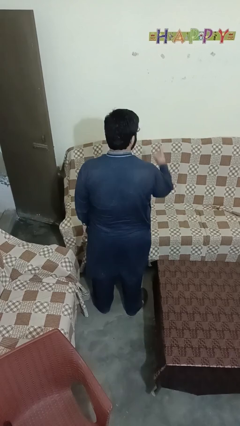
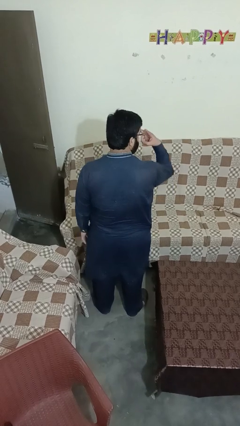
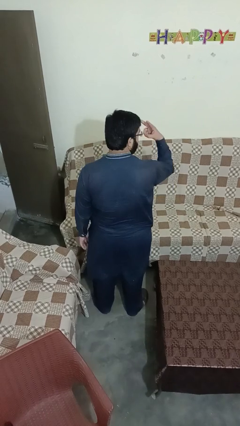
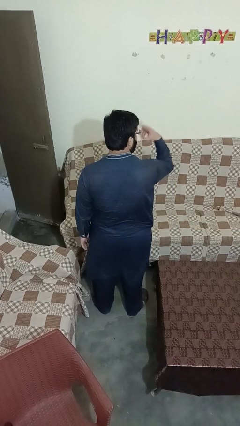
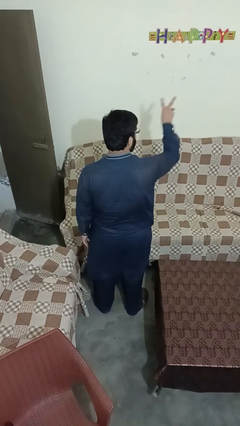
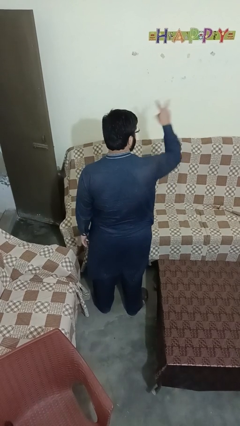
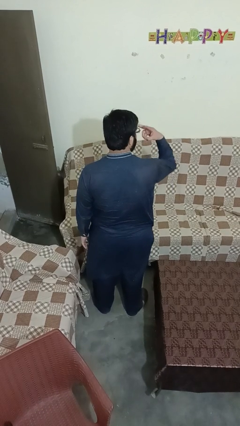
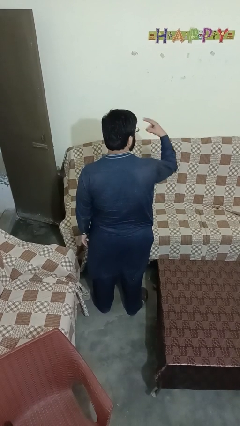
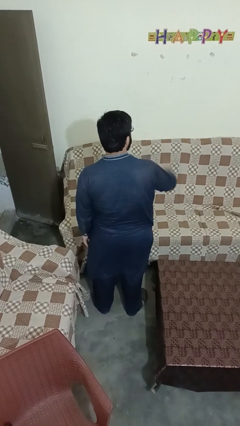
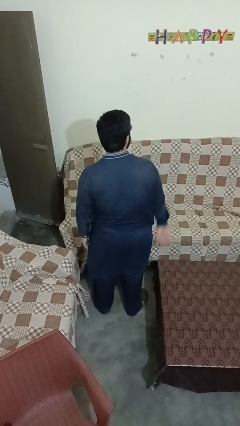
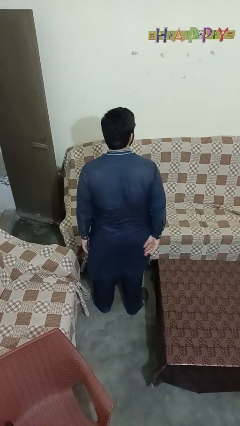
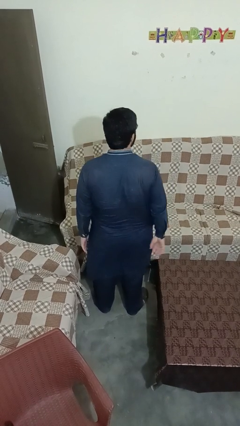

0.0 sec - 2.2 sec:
person gestures watch closely

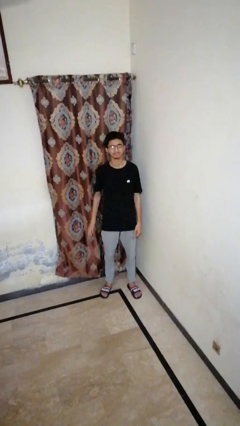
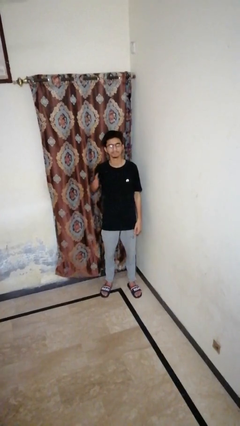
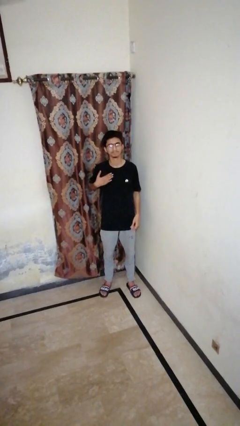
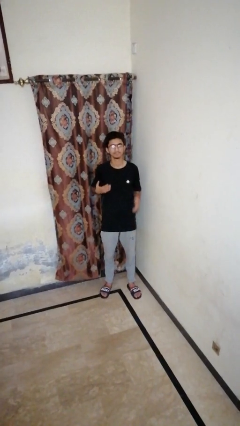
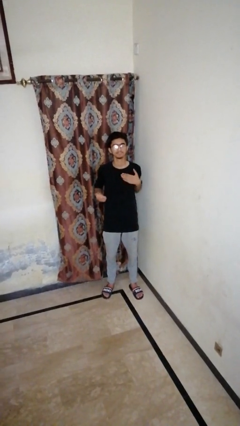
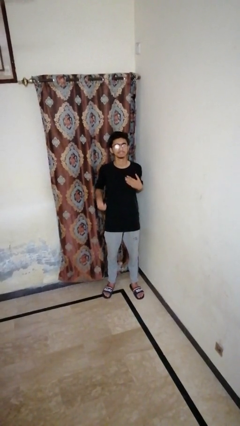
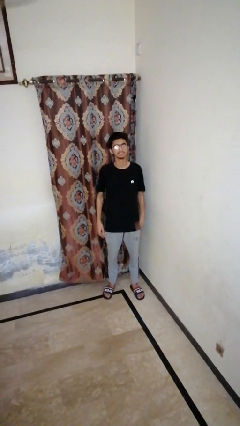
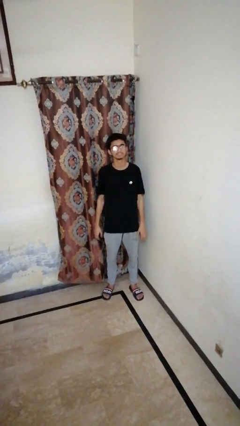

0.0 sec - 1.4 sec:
person drums on chest

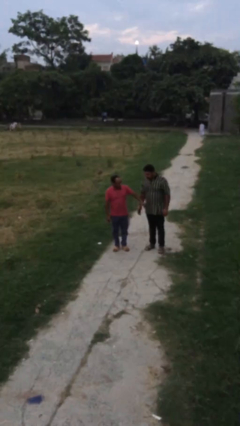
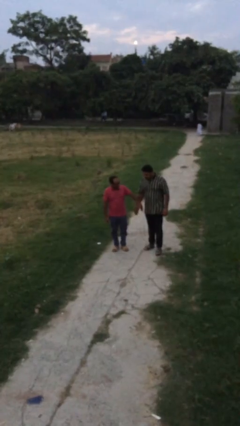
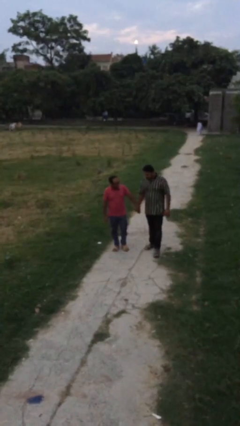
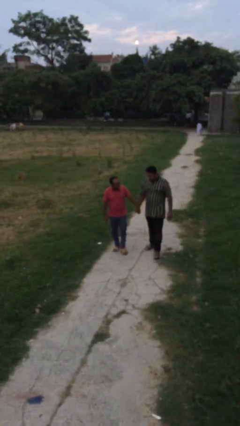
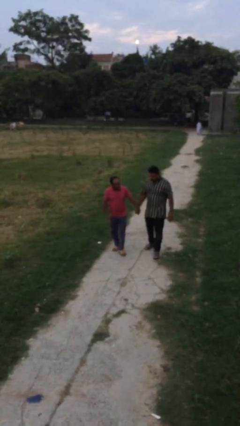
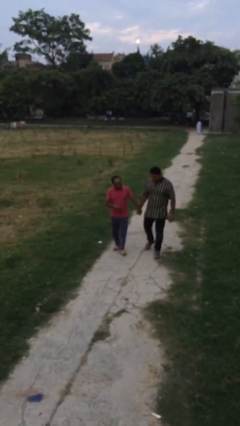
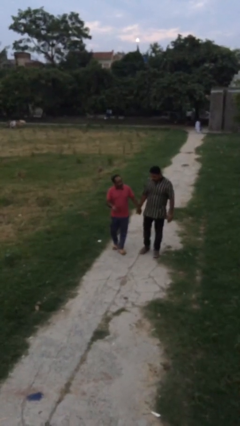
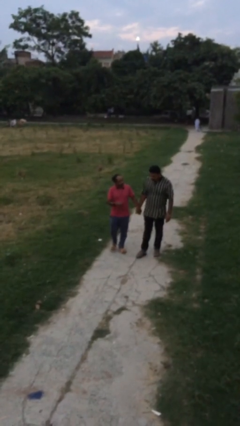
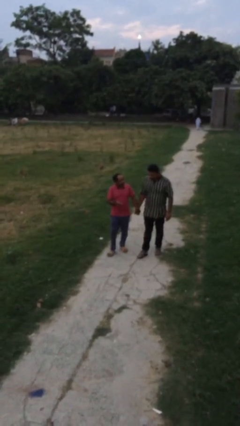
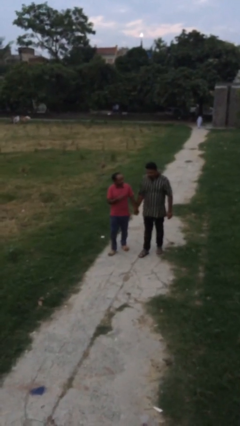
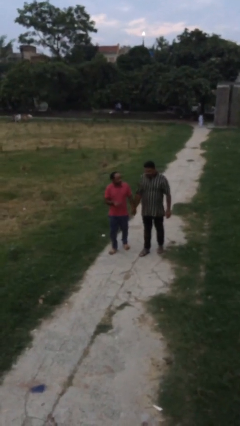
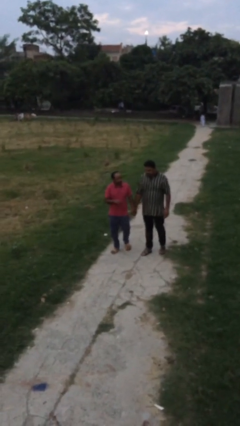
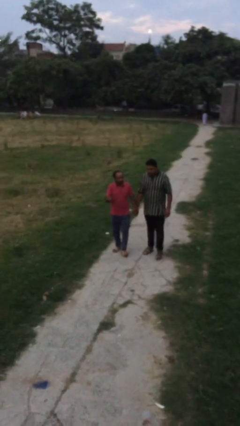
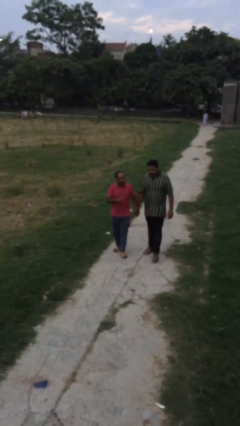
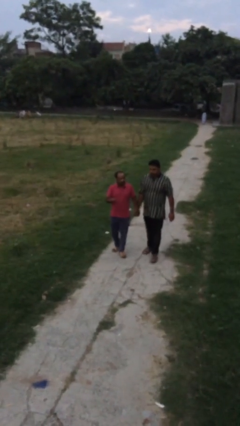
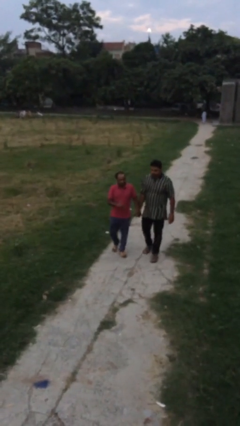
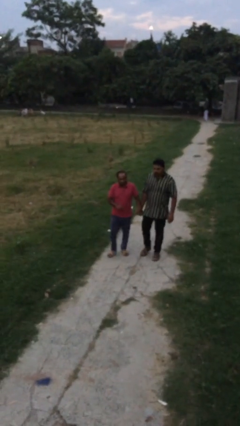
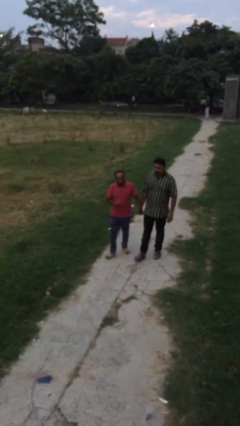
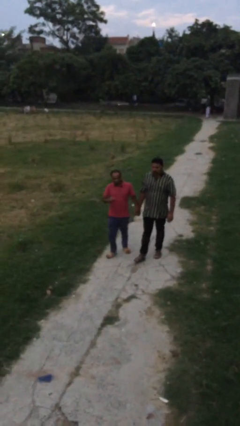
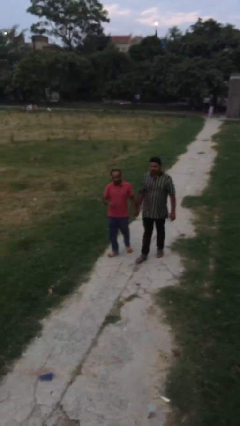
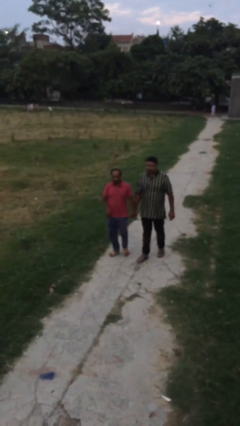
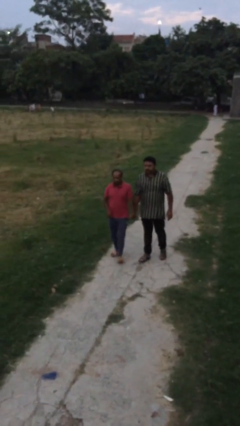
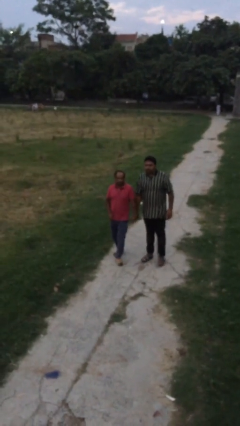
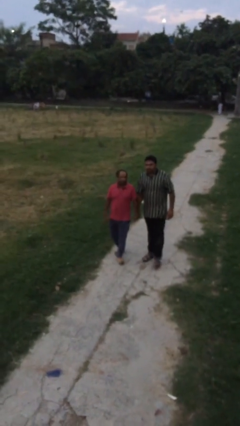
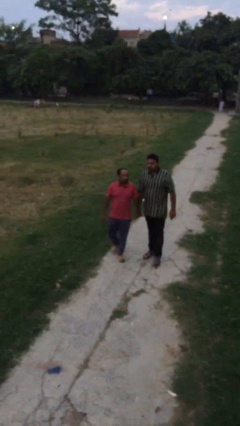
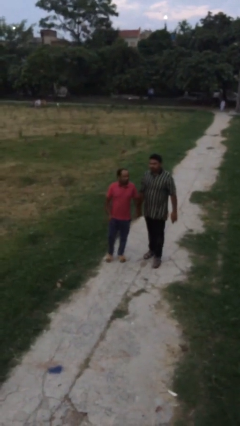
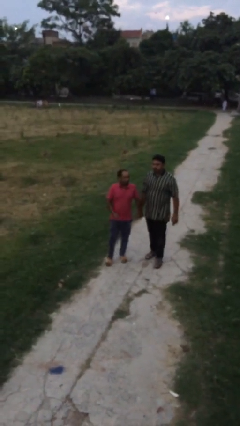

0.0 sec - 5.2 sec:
person holds hand

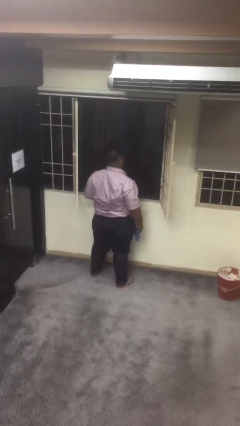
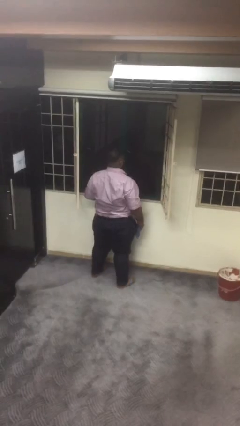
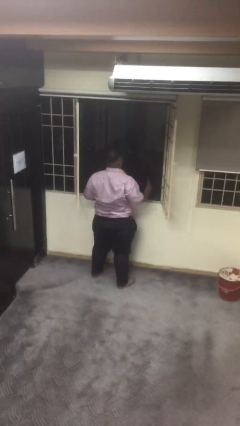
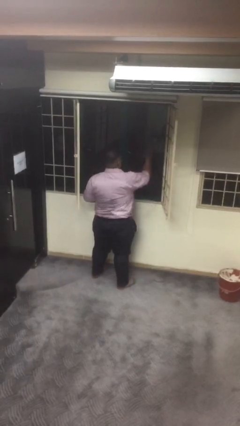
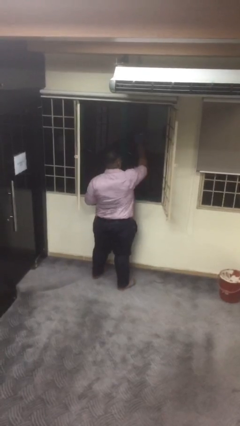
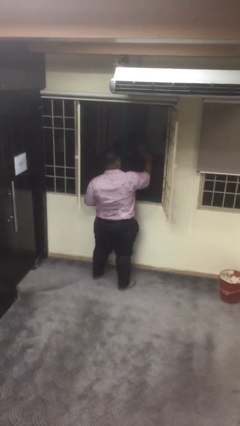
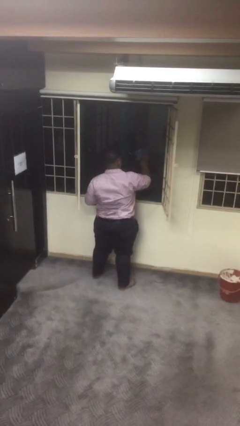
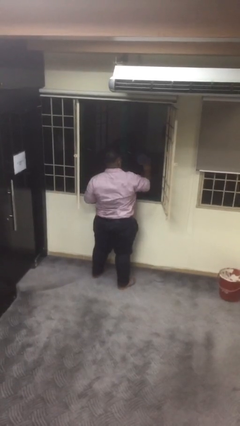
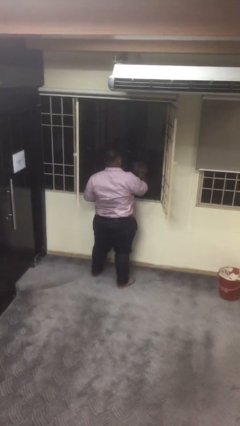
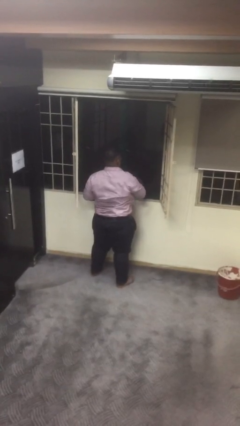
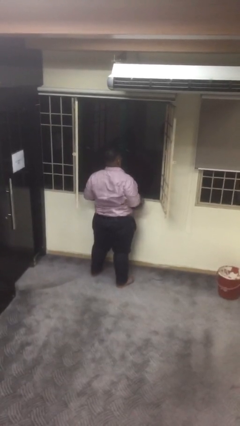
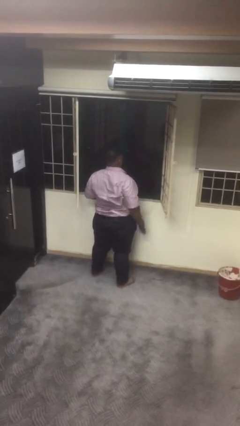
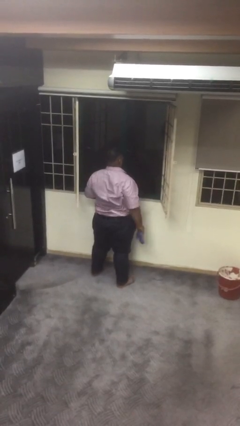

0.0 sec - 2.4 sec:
person washes window

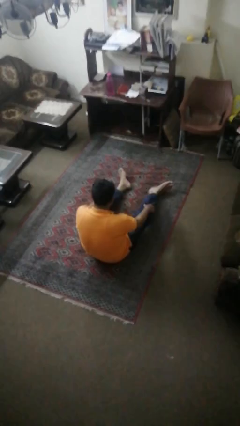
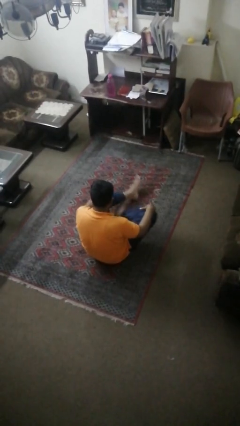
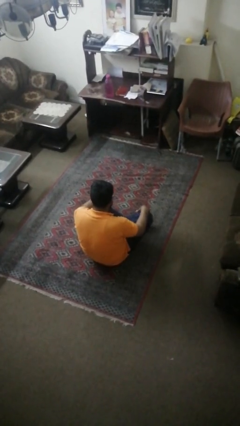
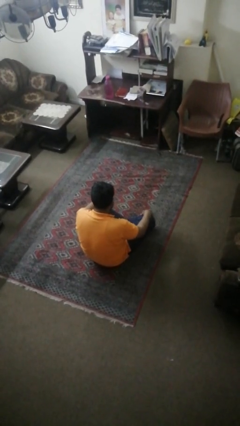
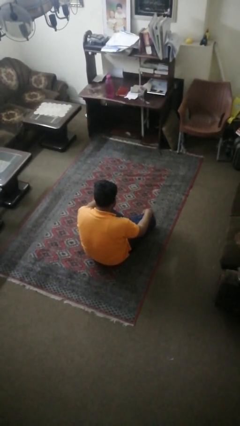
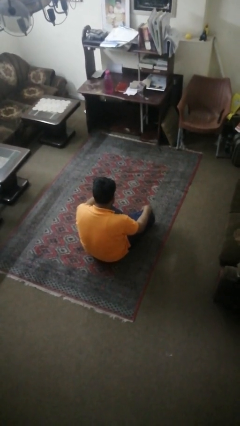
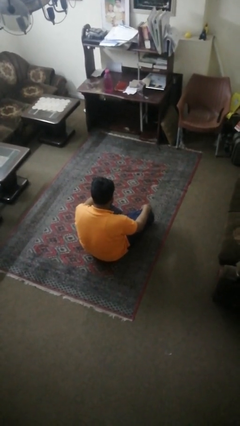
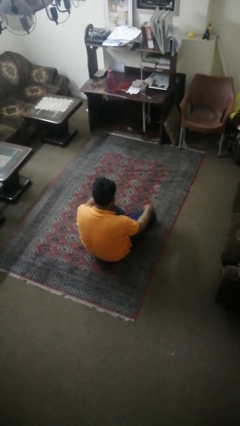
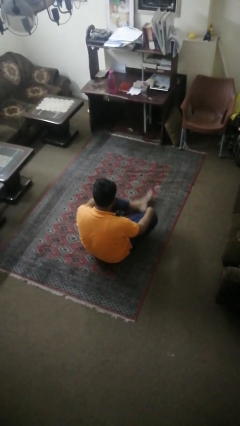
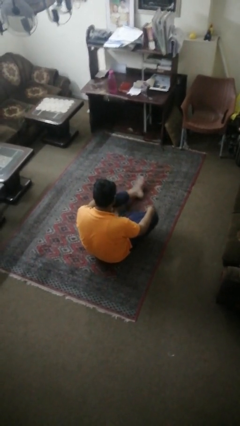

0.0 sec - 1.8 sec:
person crosses legs

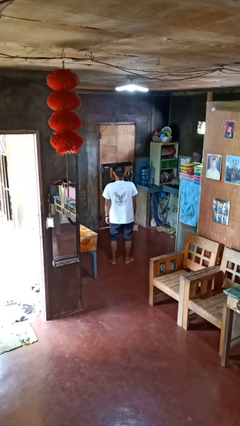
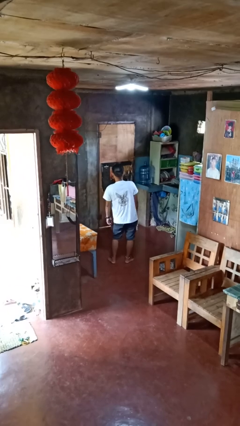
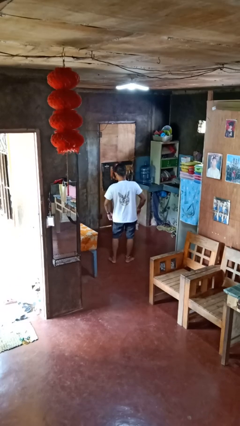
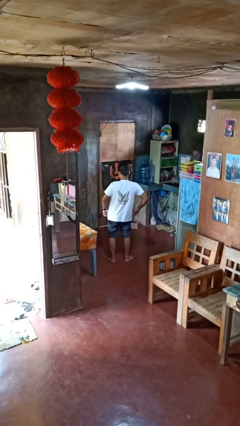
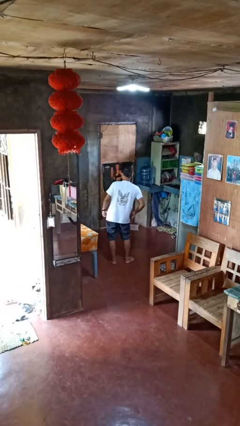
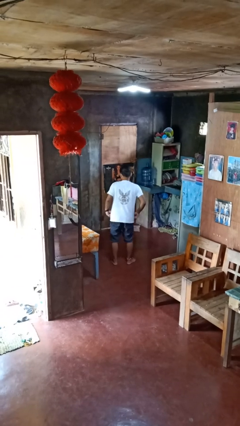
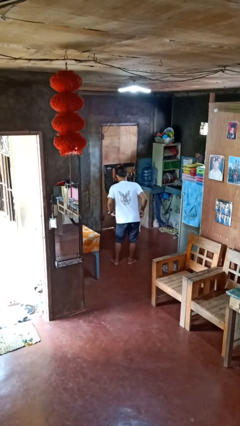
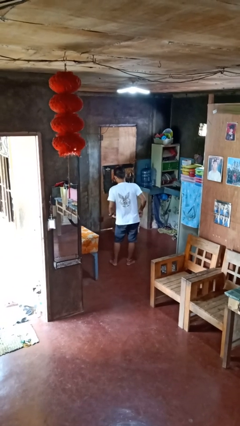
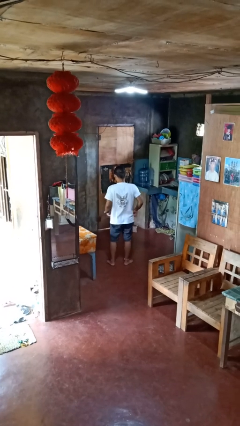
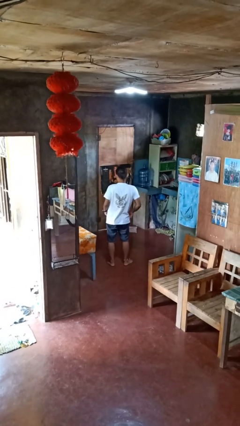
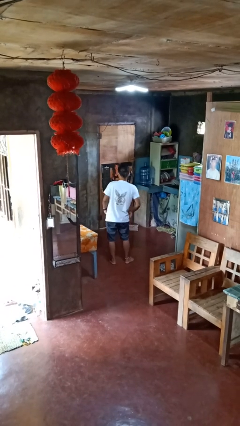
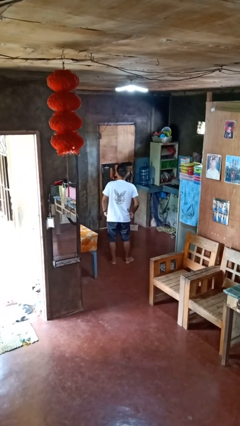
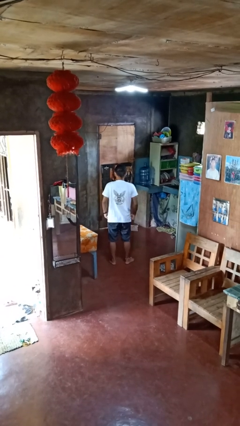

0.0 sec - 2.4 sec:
person wiggles hips

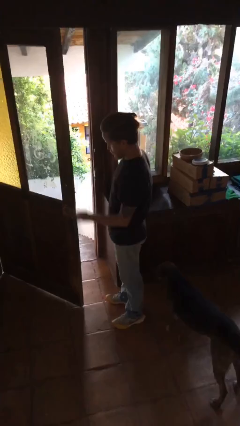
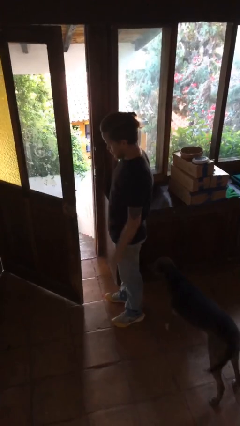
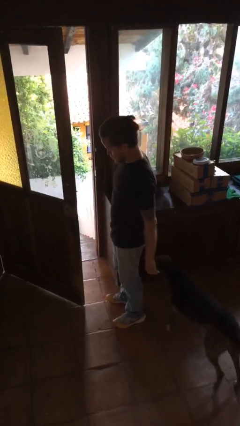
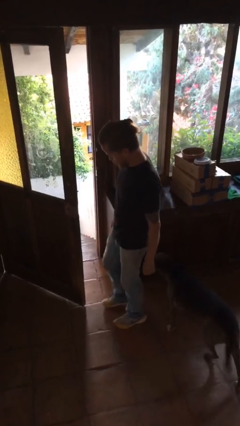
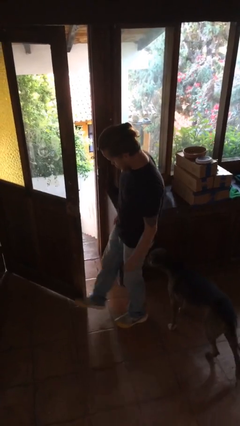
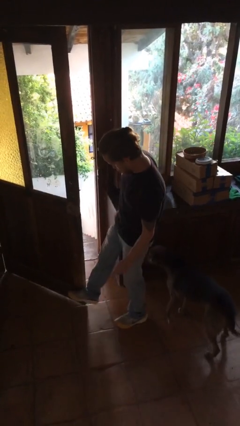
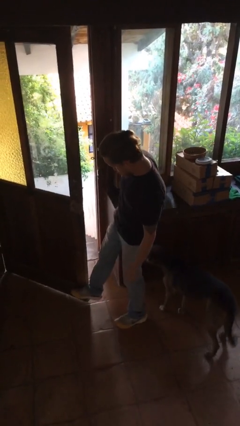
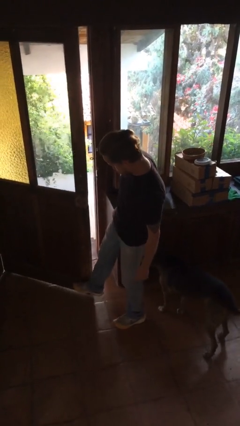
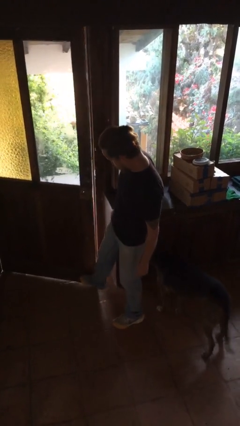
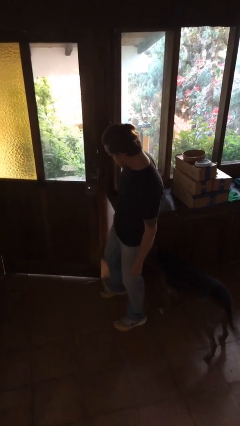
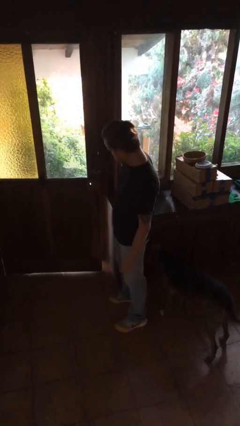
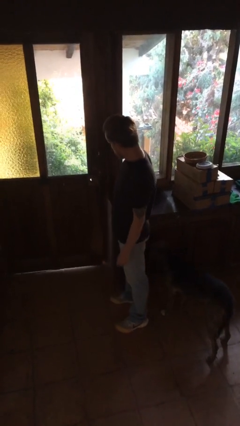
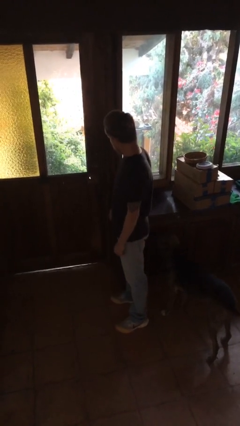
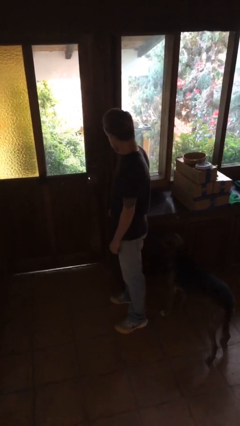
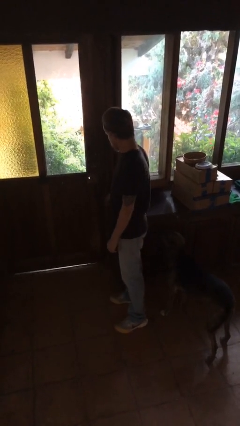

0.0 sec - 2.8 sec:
person closes door with foot
